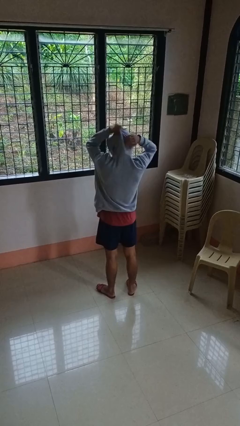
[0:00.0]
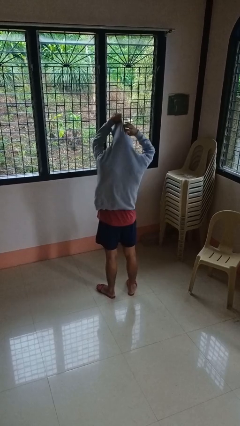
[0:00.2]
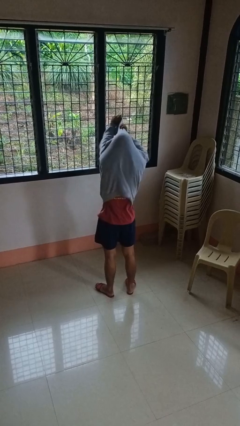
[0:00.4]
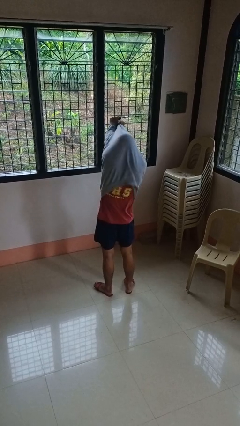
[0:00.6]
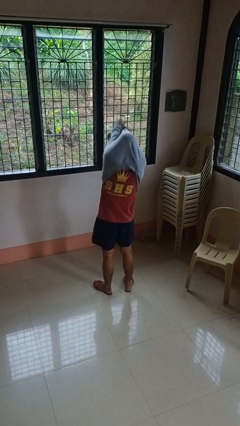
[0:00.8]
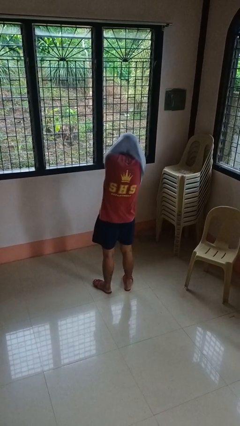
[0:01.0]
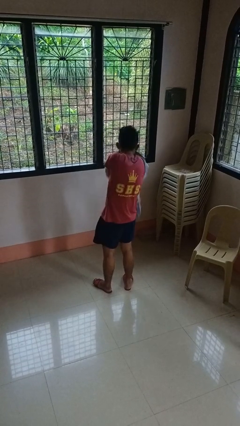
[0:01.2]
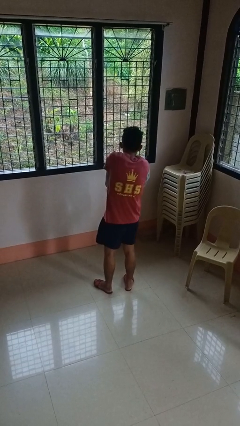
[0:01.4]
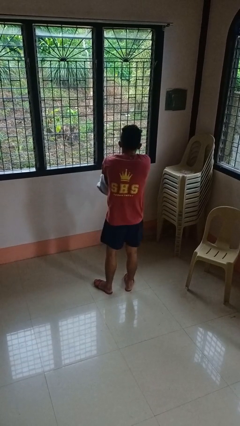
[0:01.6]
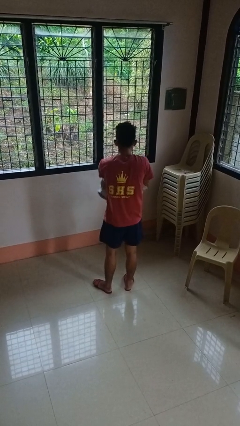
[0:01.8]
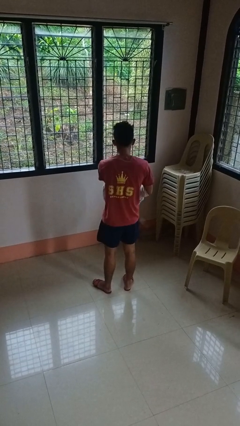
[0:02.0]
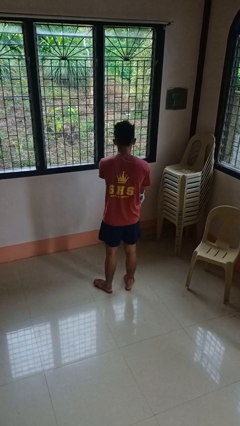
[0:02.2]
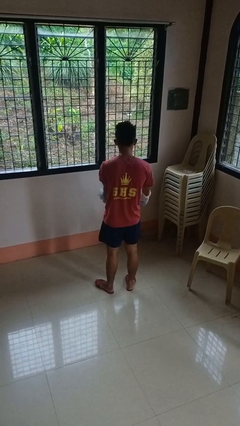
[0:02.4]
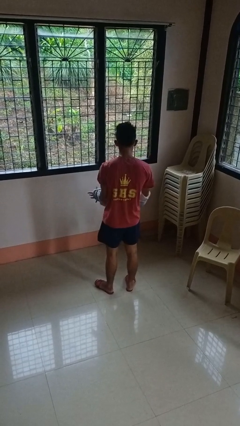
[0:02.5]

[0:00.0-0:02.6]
person takes off hoodie

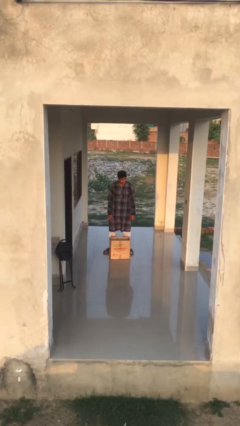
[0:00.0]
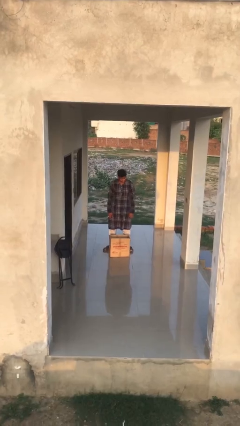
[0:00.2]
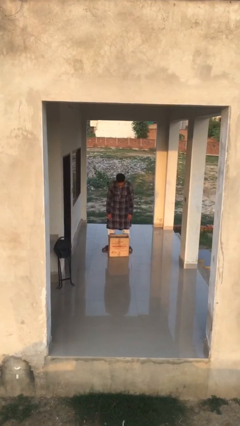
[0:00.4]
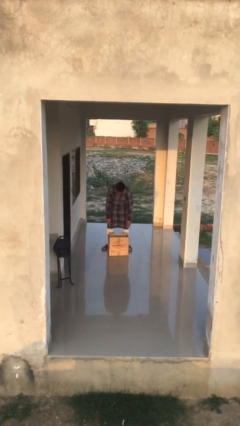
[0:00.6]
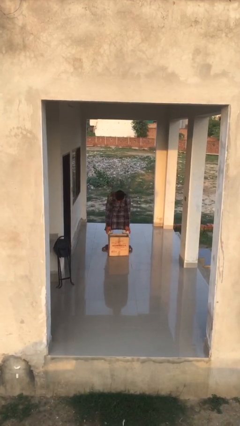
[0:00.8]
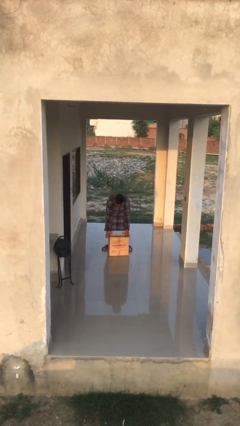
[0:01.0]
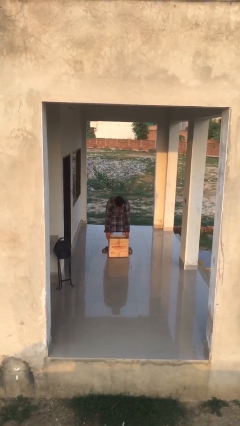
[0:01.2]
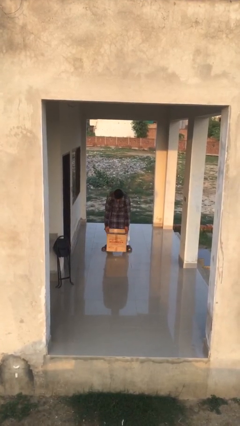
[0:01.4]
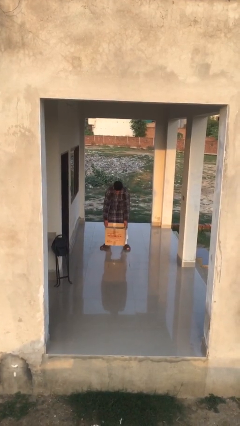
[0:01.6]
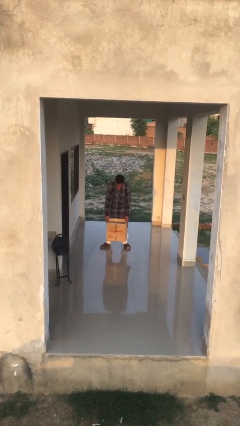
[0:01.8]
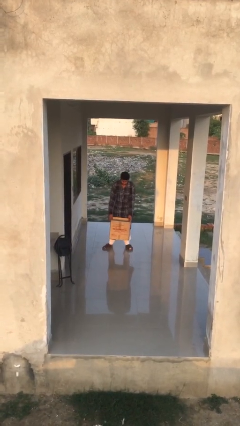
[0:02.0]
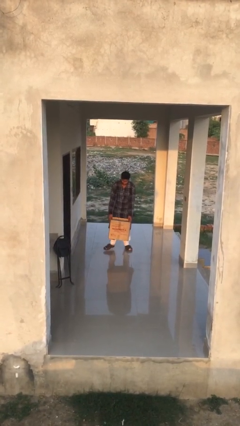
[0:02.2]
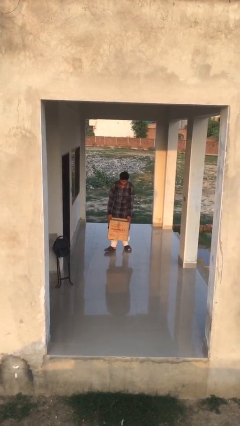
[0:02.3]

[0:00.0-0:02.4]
person picks up object from floor

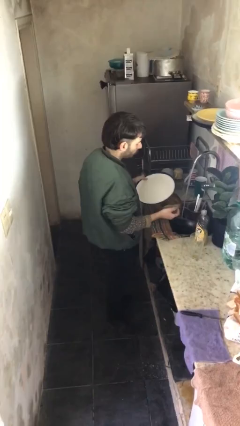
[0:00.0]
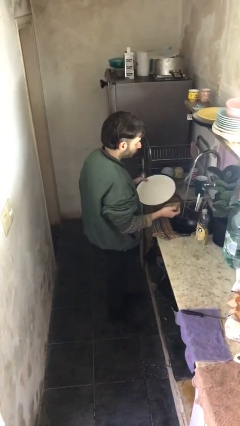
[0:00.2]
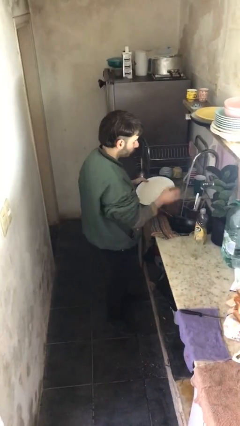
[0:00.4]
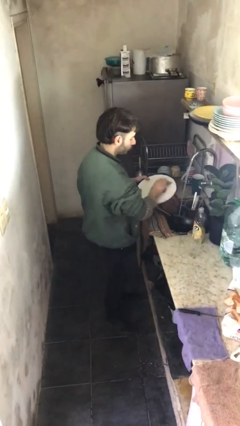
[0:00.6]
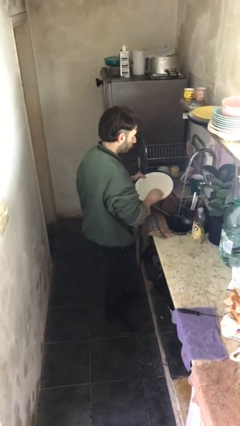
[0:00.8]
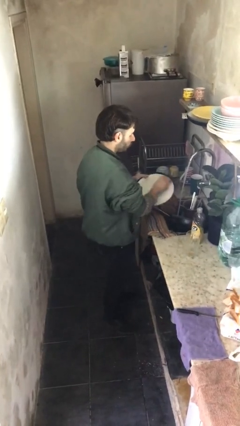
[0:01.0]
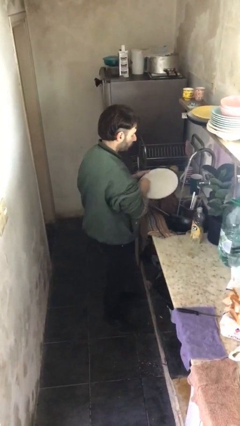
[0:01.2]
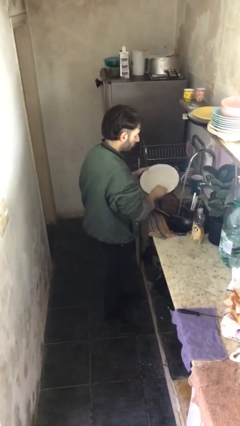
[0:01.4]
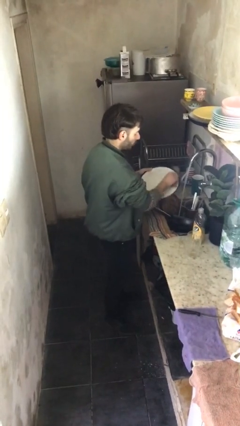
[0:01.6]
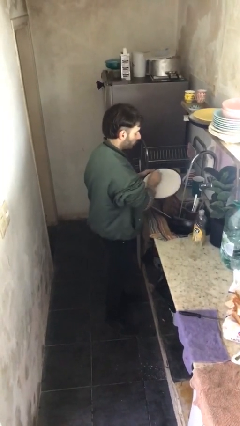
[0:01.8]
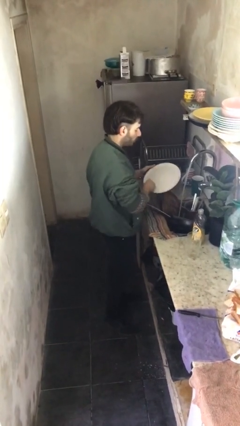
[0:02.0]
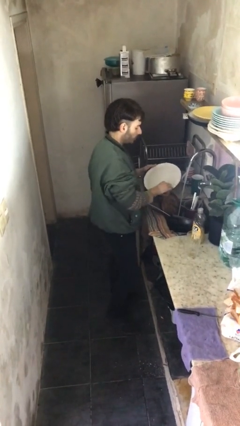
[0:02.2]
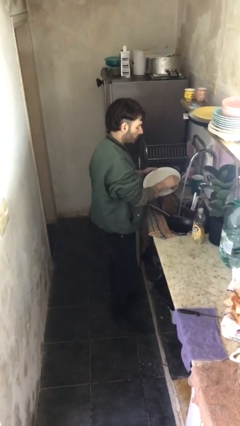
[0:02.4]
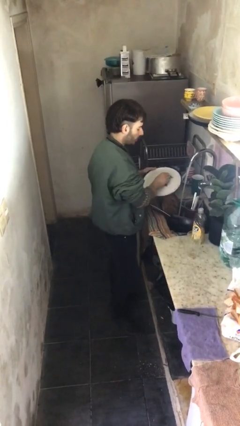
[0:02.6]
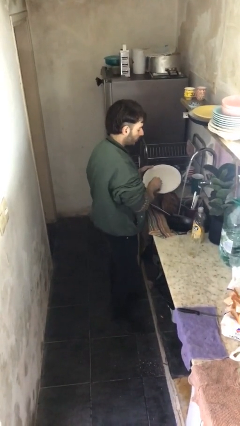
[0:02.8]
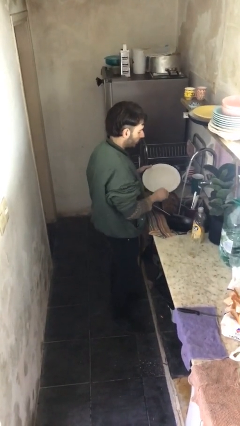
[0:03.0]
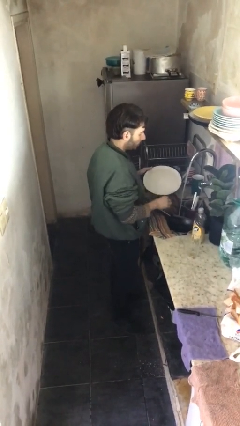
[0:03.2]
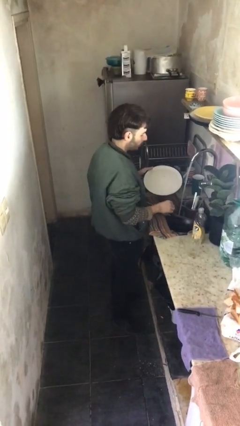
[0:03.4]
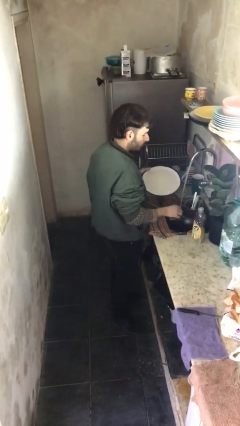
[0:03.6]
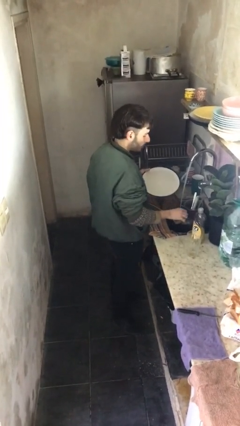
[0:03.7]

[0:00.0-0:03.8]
person washes dish

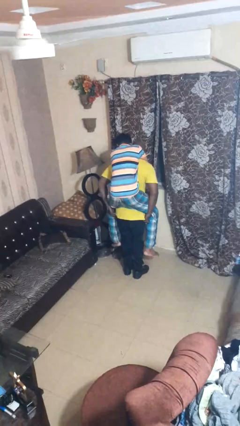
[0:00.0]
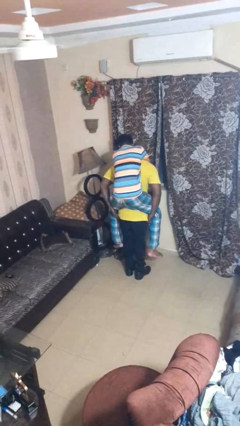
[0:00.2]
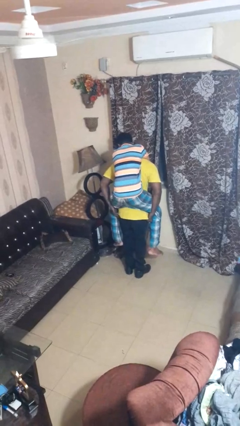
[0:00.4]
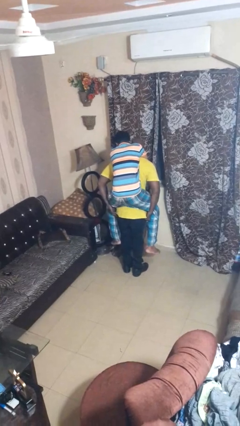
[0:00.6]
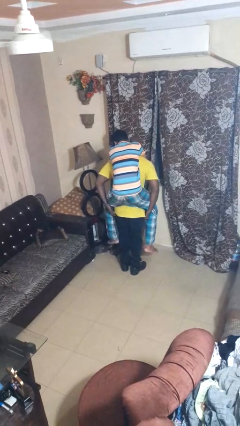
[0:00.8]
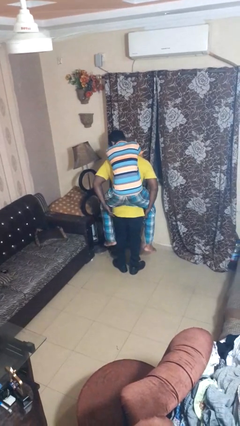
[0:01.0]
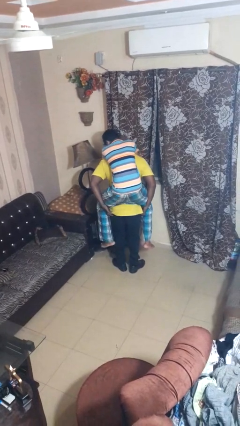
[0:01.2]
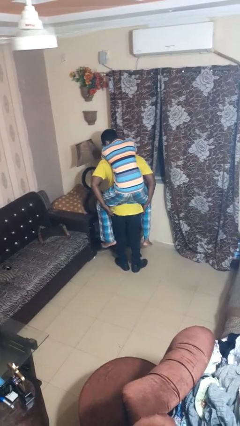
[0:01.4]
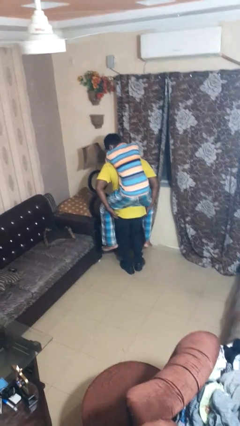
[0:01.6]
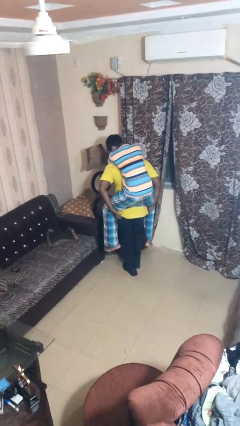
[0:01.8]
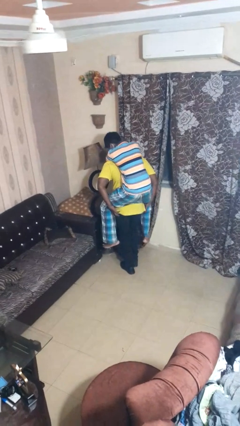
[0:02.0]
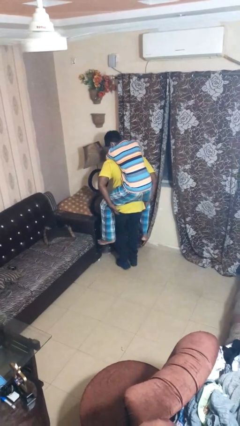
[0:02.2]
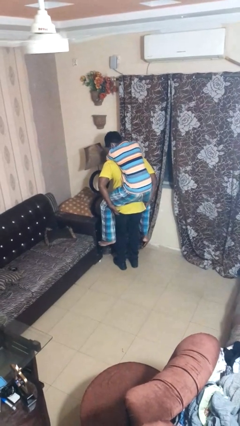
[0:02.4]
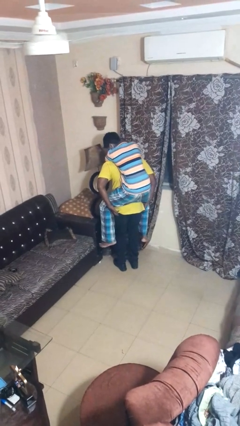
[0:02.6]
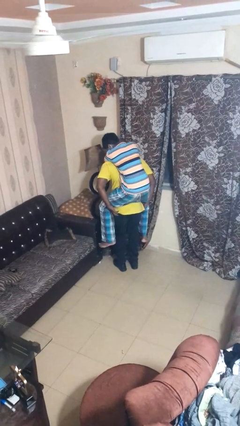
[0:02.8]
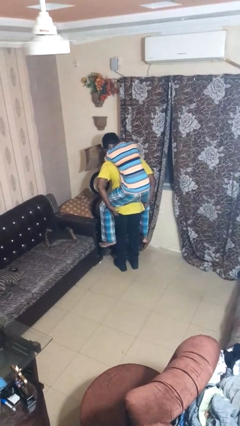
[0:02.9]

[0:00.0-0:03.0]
person carries person on back

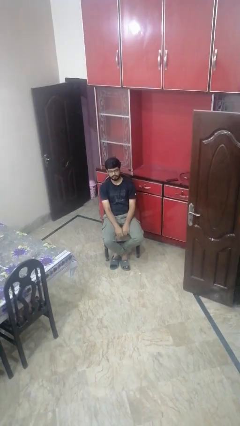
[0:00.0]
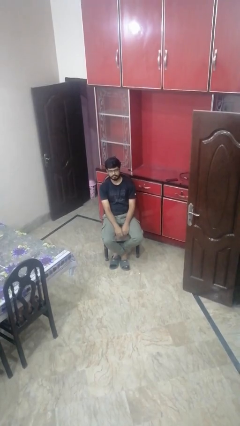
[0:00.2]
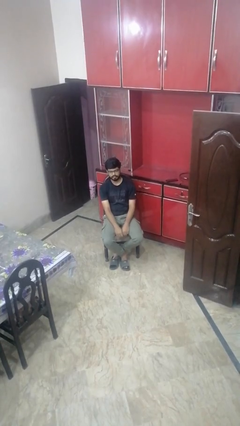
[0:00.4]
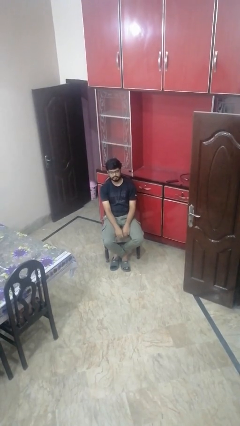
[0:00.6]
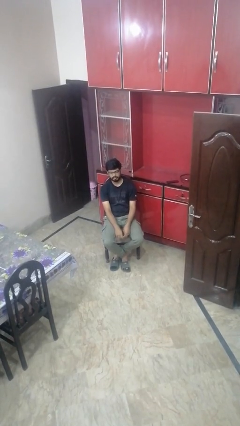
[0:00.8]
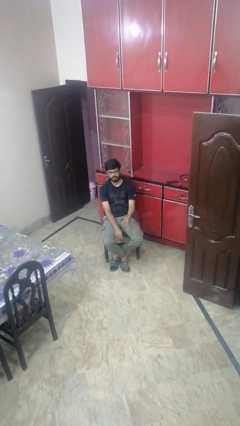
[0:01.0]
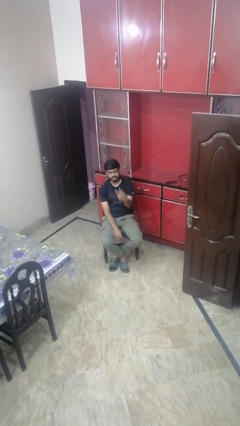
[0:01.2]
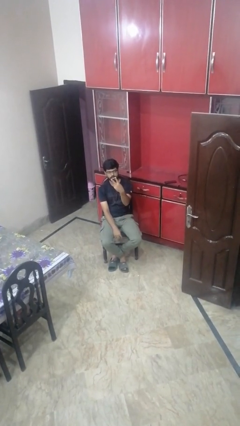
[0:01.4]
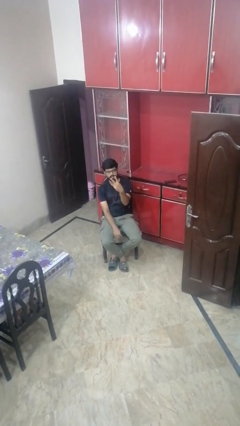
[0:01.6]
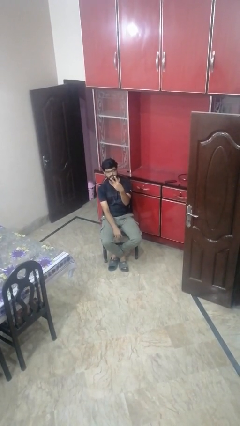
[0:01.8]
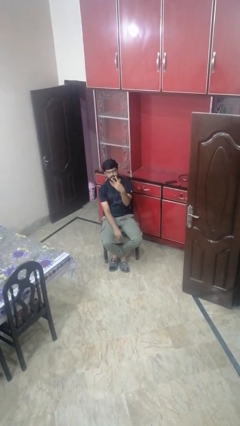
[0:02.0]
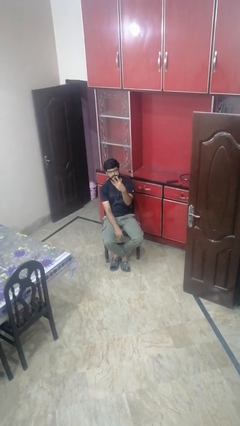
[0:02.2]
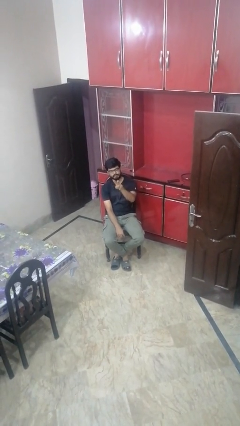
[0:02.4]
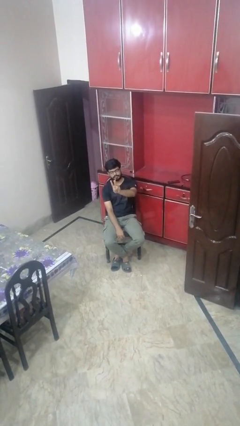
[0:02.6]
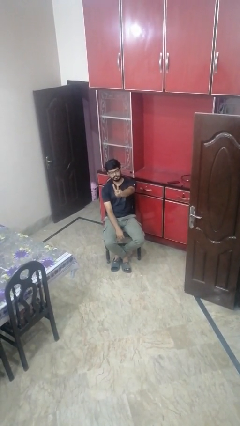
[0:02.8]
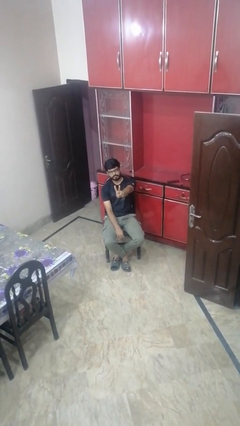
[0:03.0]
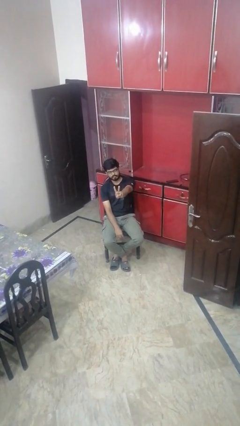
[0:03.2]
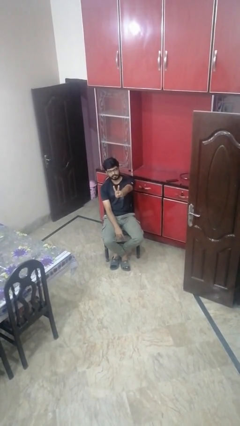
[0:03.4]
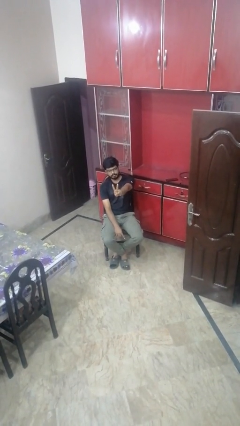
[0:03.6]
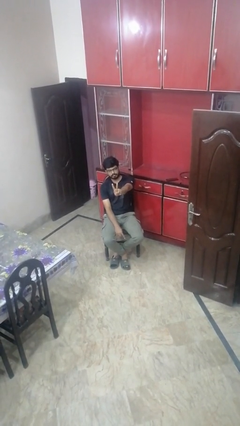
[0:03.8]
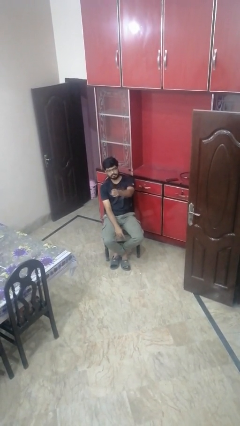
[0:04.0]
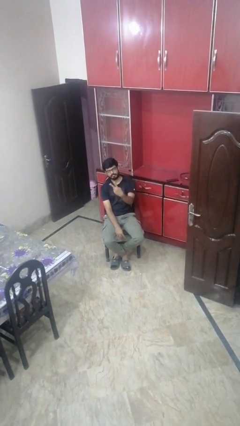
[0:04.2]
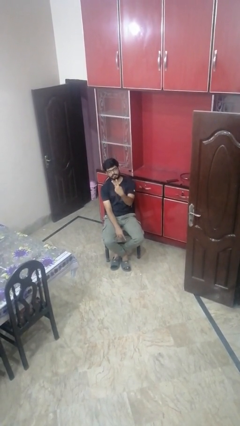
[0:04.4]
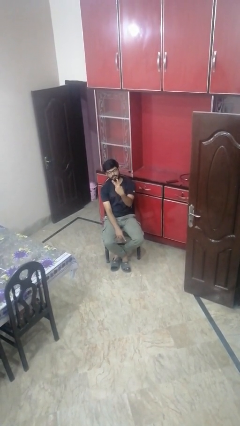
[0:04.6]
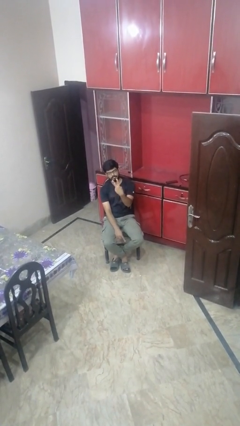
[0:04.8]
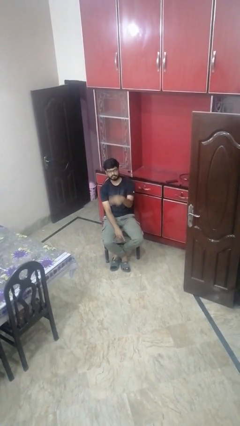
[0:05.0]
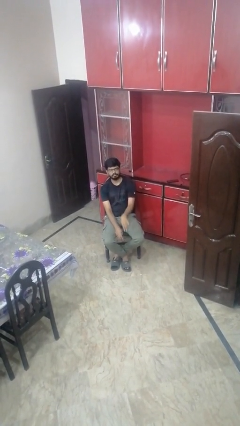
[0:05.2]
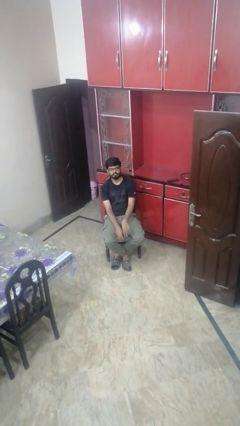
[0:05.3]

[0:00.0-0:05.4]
person gestures peace

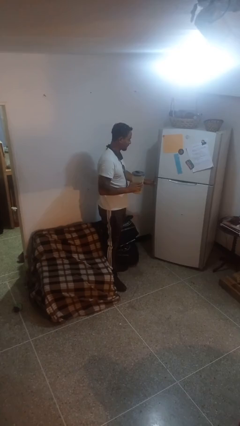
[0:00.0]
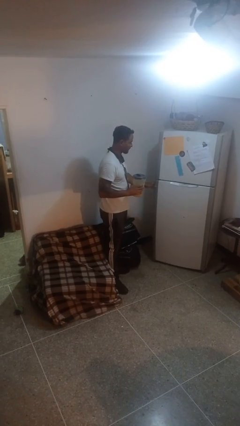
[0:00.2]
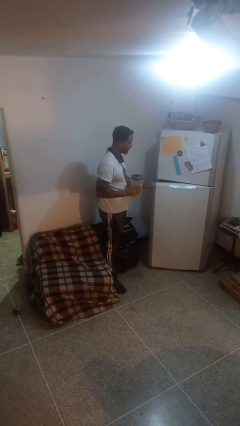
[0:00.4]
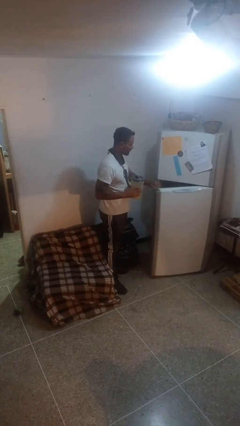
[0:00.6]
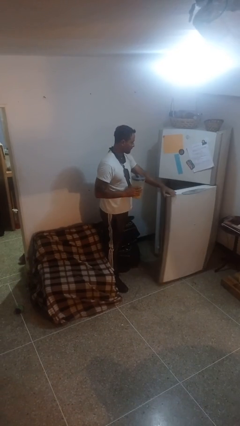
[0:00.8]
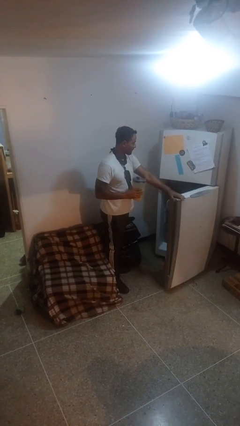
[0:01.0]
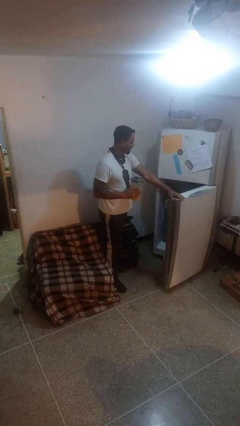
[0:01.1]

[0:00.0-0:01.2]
person opens refrigerator
